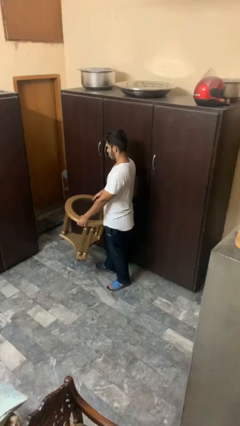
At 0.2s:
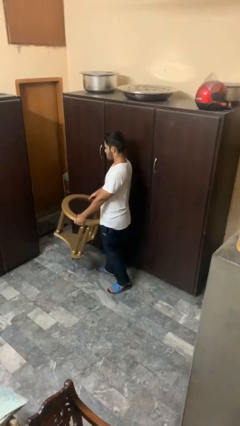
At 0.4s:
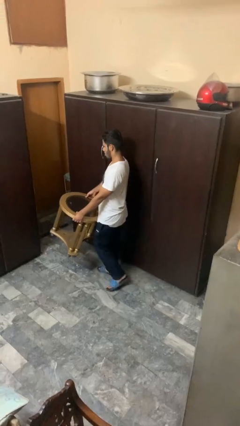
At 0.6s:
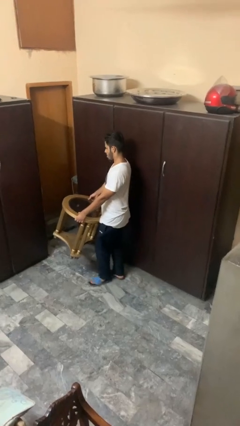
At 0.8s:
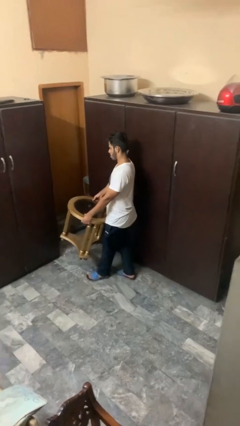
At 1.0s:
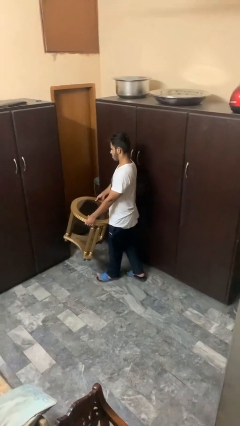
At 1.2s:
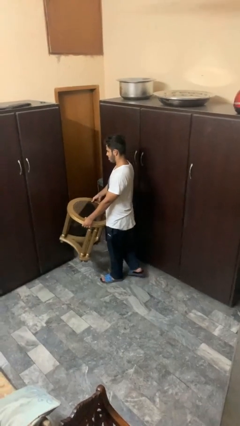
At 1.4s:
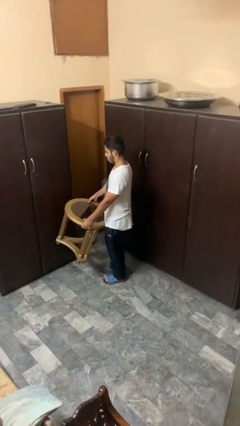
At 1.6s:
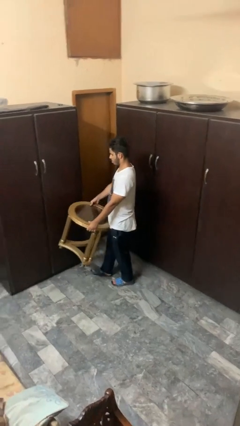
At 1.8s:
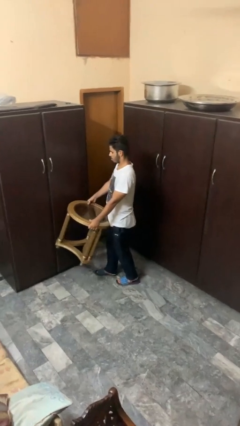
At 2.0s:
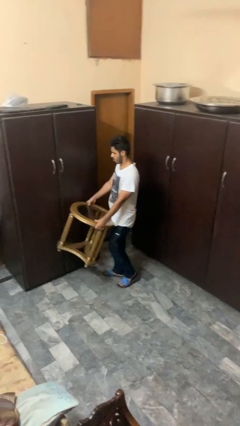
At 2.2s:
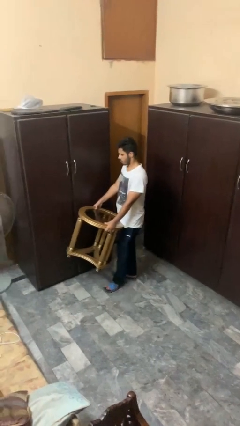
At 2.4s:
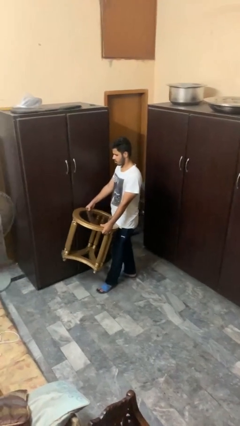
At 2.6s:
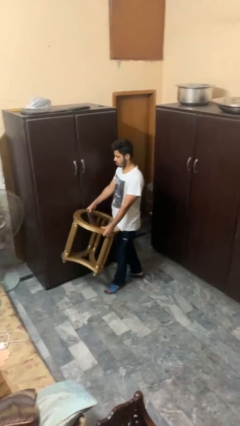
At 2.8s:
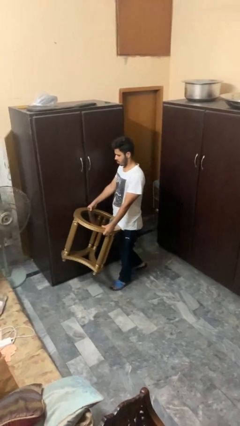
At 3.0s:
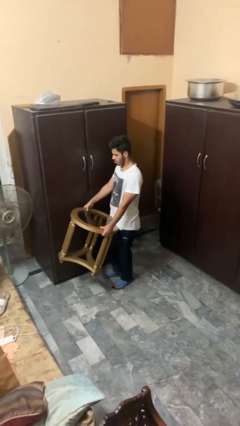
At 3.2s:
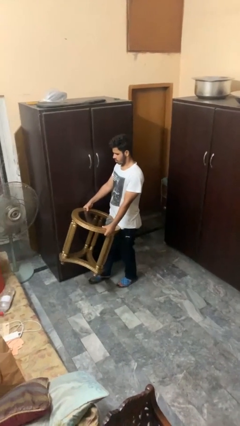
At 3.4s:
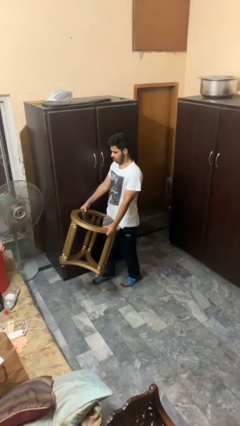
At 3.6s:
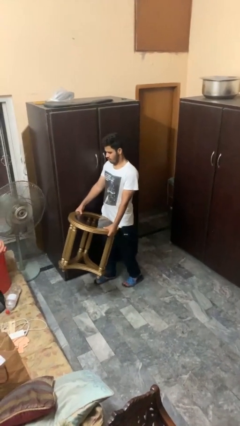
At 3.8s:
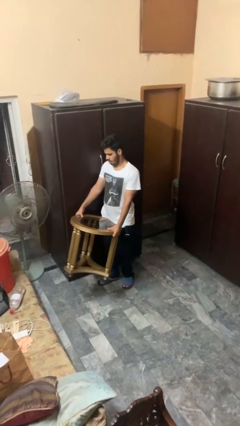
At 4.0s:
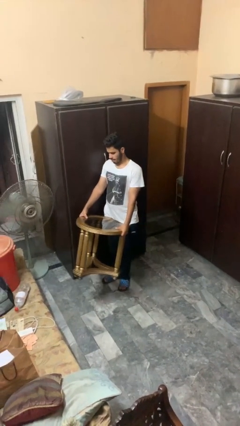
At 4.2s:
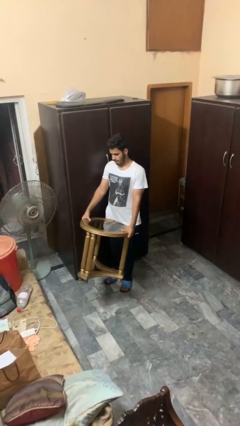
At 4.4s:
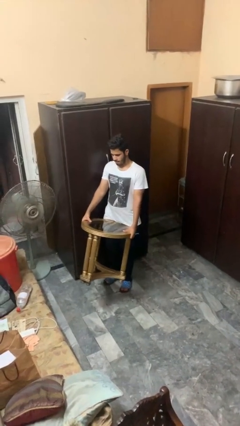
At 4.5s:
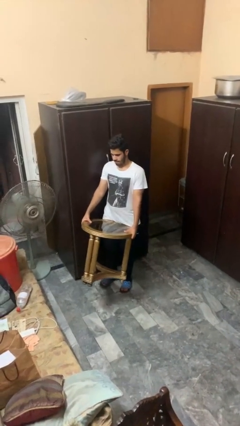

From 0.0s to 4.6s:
person carries furniture

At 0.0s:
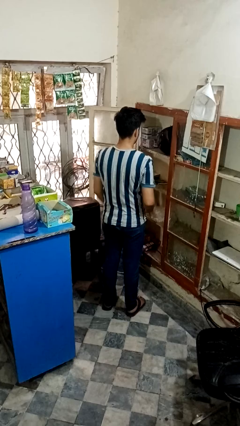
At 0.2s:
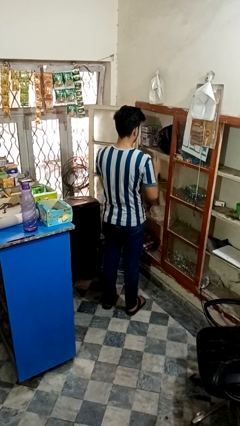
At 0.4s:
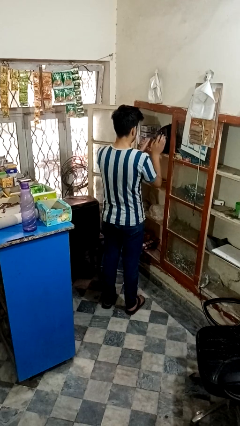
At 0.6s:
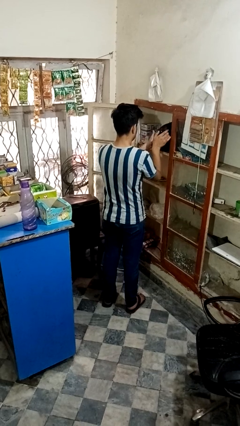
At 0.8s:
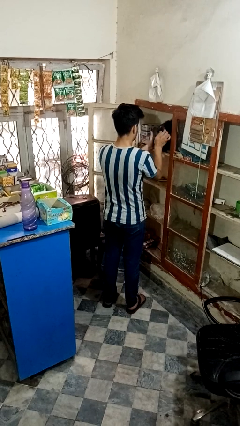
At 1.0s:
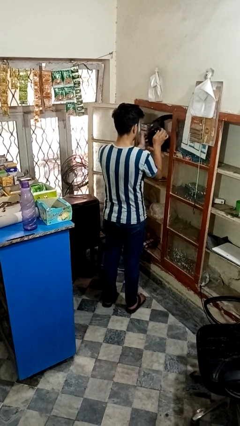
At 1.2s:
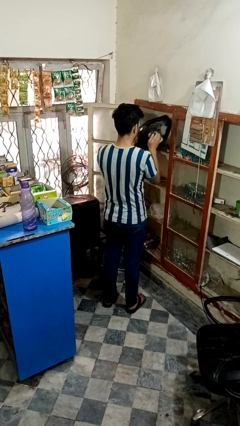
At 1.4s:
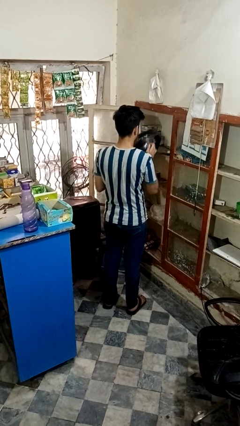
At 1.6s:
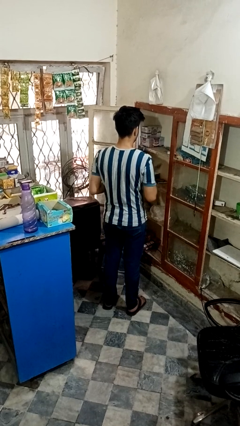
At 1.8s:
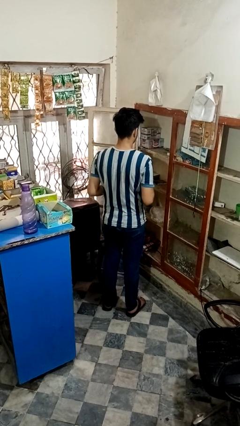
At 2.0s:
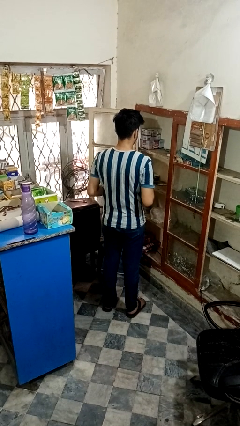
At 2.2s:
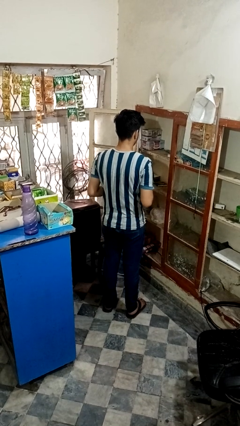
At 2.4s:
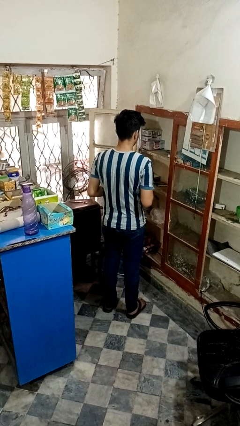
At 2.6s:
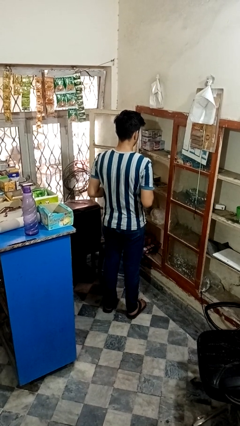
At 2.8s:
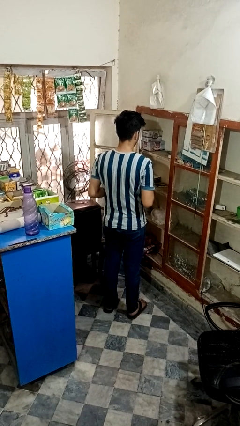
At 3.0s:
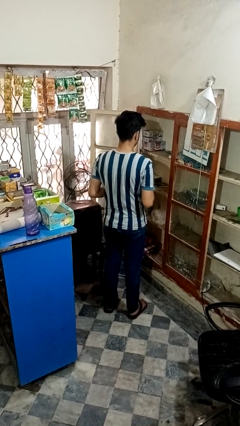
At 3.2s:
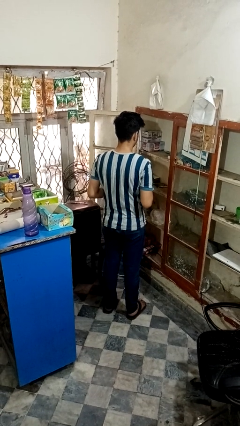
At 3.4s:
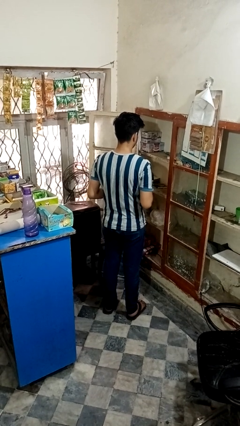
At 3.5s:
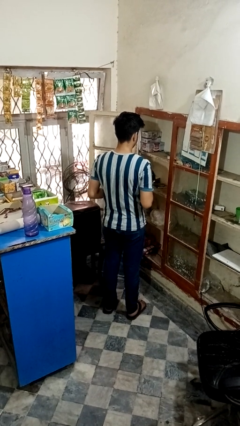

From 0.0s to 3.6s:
person picks up object from shelf

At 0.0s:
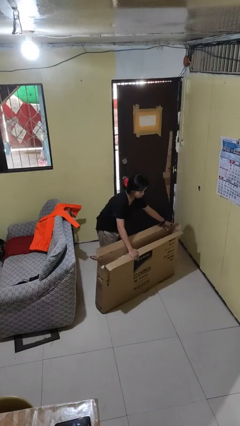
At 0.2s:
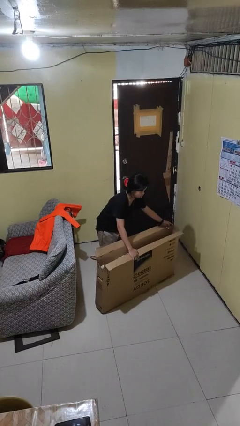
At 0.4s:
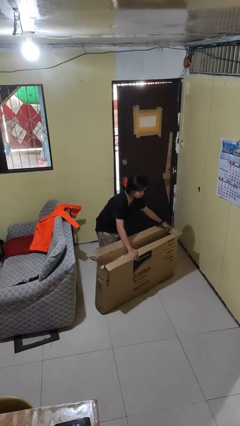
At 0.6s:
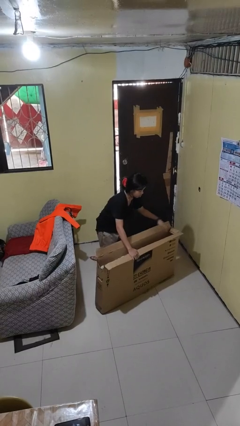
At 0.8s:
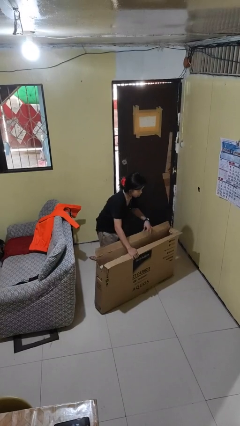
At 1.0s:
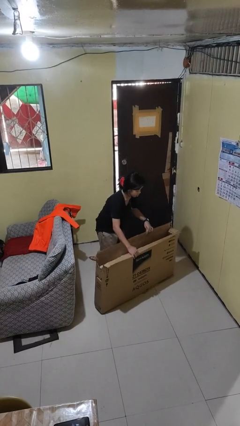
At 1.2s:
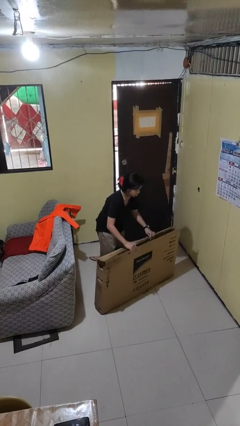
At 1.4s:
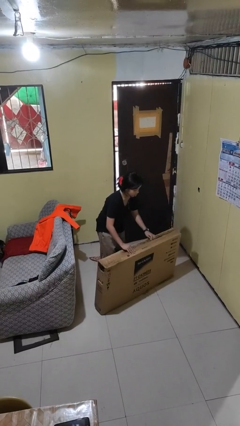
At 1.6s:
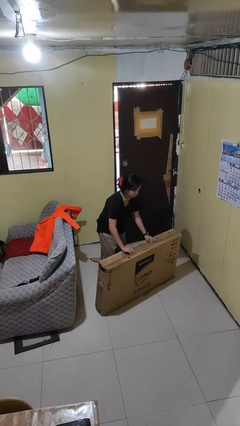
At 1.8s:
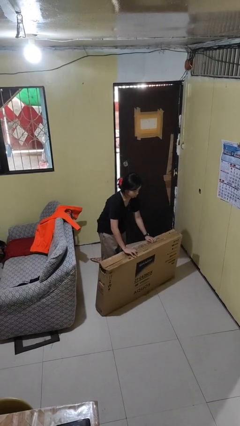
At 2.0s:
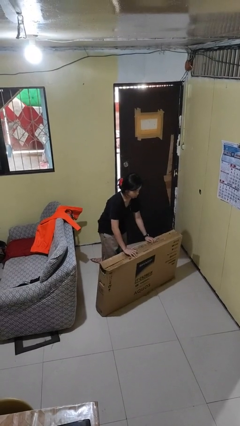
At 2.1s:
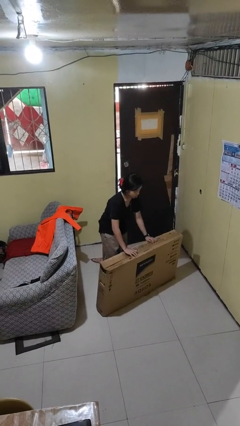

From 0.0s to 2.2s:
person closes box

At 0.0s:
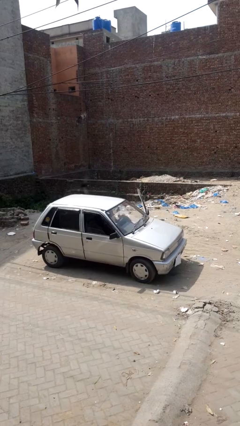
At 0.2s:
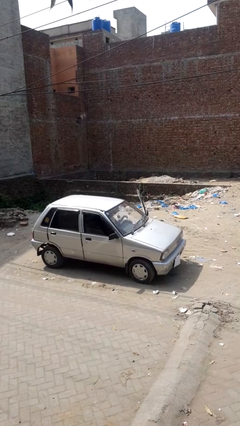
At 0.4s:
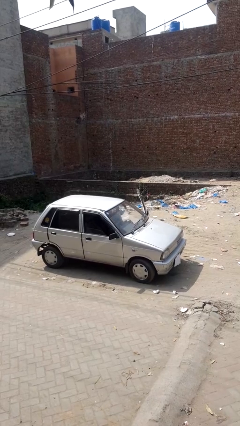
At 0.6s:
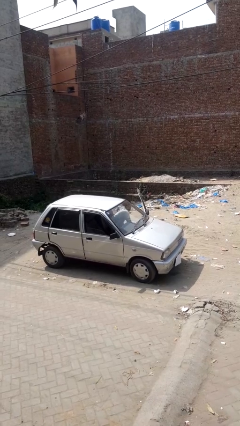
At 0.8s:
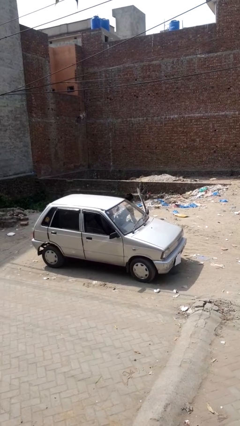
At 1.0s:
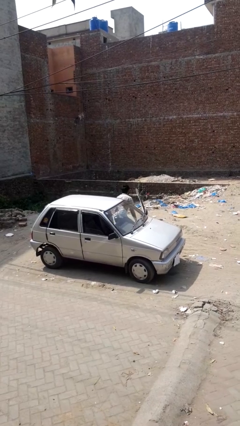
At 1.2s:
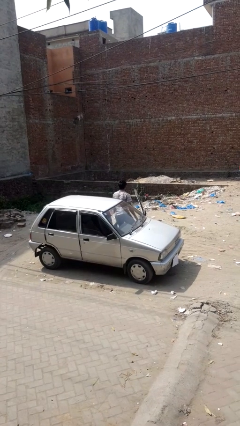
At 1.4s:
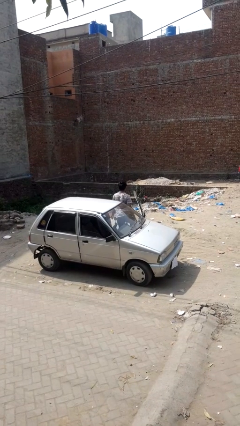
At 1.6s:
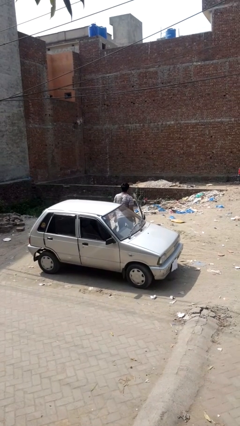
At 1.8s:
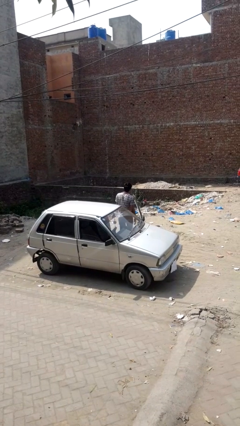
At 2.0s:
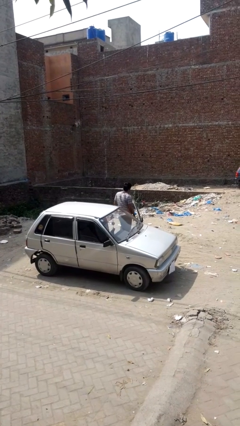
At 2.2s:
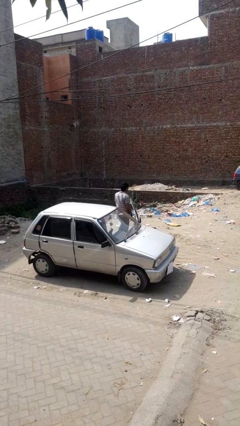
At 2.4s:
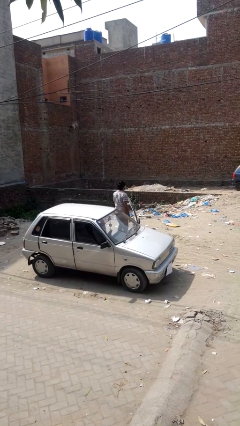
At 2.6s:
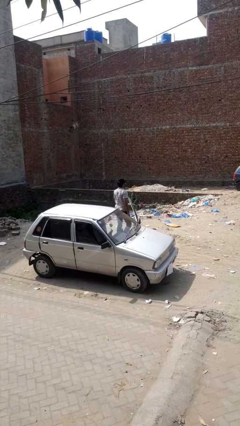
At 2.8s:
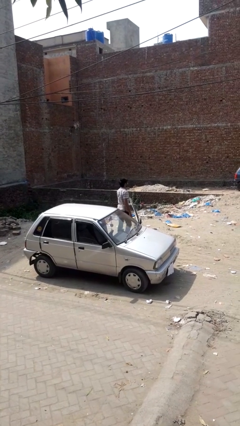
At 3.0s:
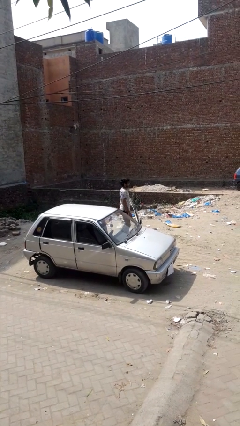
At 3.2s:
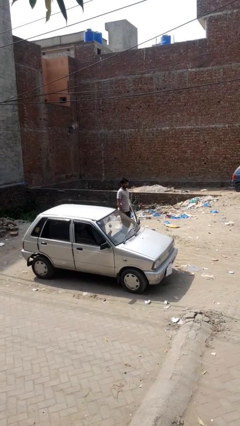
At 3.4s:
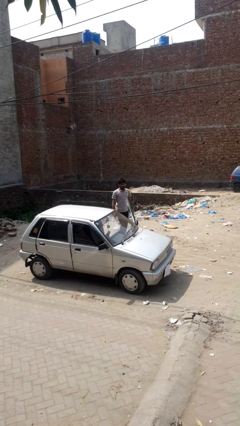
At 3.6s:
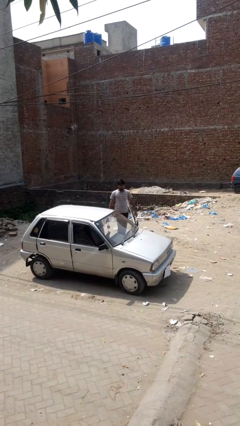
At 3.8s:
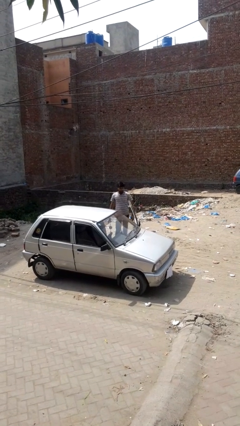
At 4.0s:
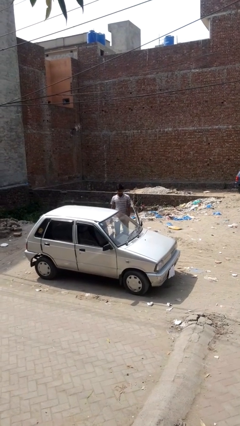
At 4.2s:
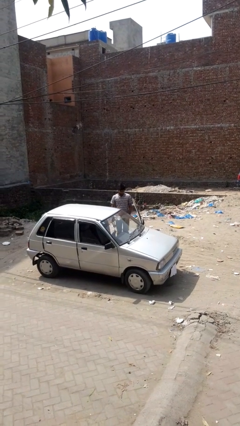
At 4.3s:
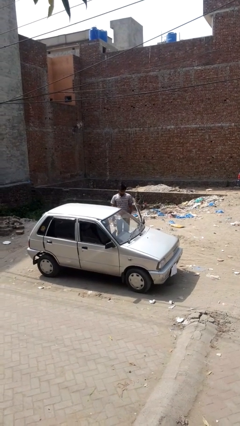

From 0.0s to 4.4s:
person exits car

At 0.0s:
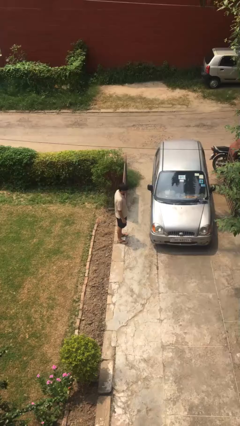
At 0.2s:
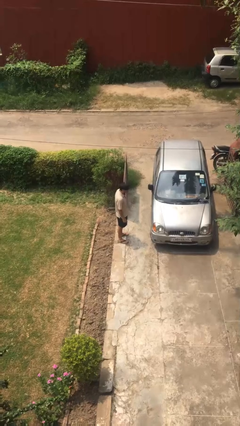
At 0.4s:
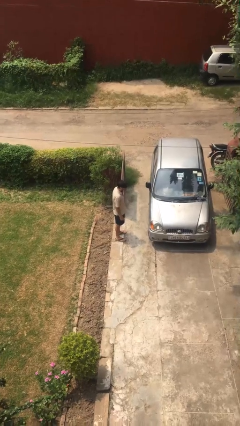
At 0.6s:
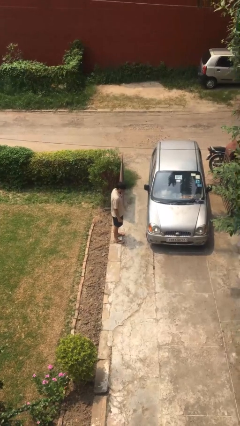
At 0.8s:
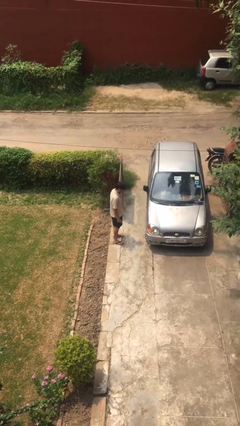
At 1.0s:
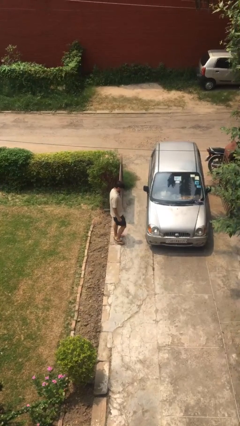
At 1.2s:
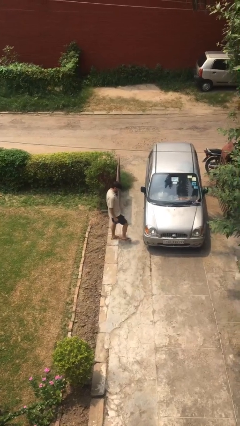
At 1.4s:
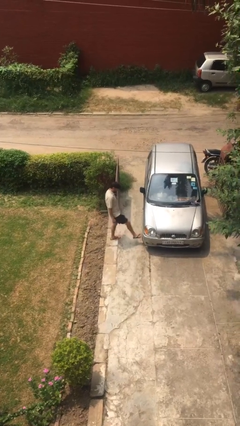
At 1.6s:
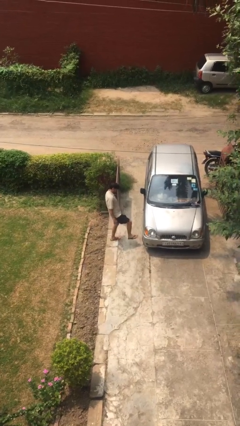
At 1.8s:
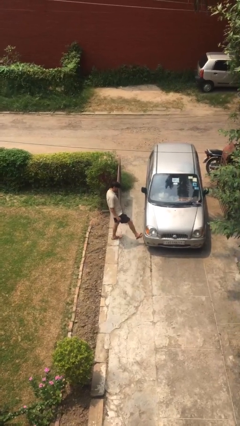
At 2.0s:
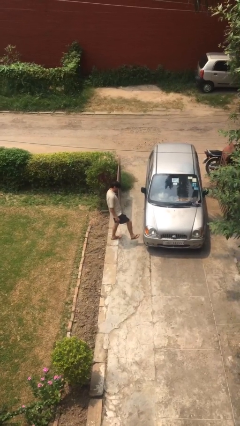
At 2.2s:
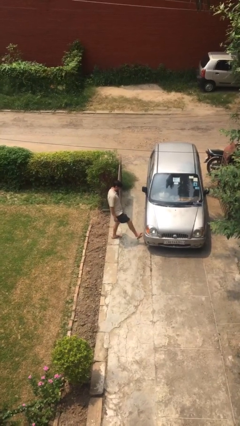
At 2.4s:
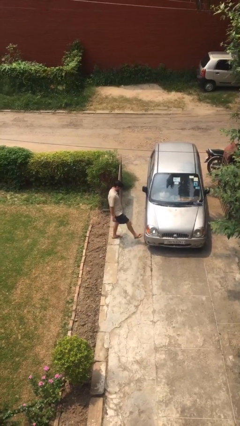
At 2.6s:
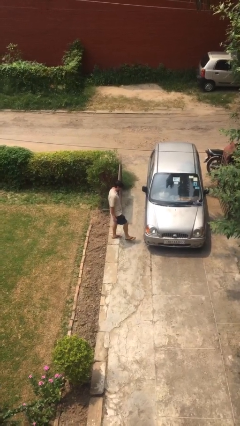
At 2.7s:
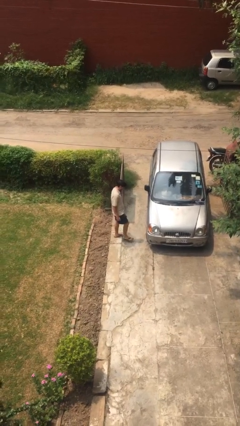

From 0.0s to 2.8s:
person kicks car tires
